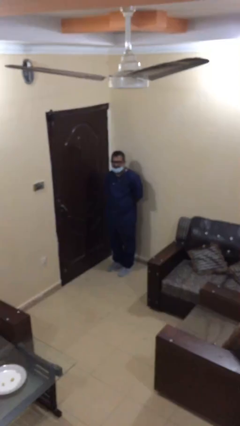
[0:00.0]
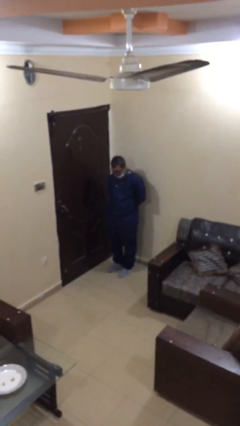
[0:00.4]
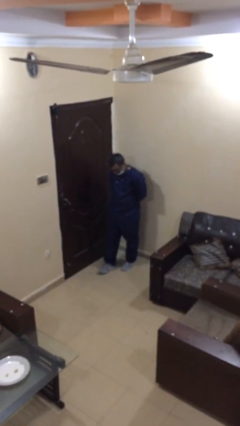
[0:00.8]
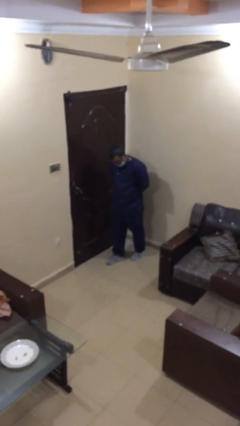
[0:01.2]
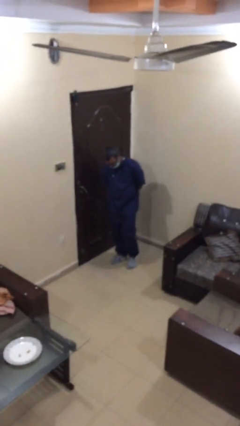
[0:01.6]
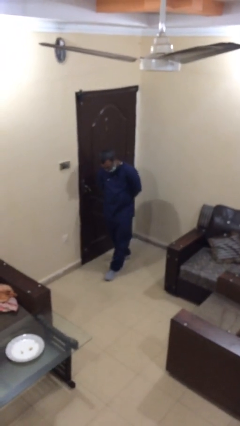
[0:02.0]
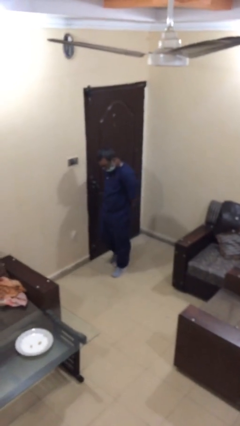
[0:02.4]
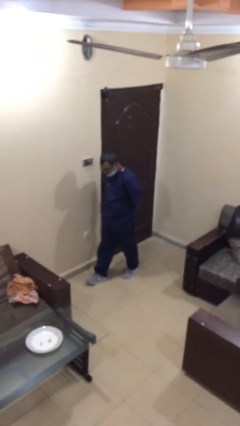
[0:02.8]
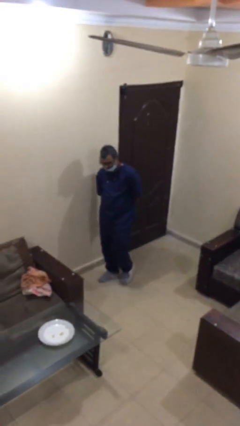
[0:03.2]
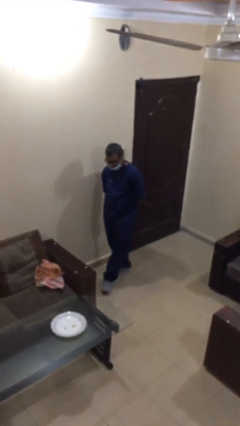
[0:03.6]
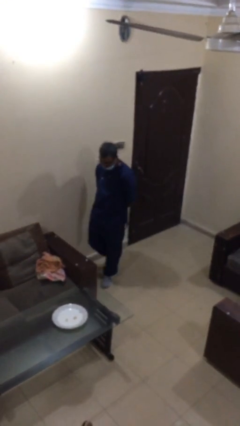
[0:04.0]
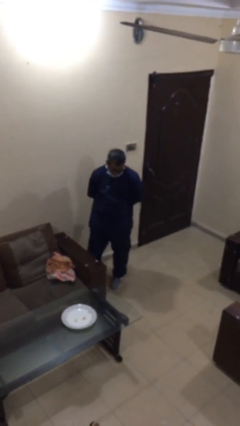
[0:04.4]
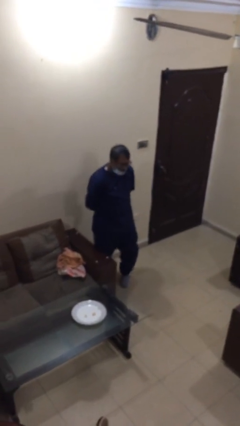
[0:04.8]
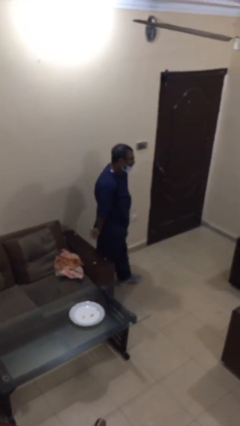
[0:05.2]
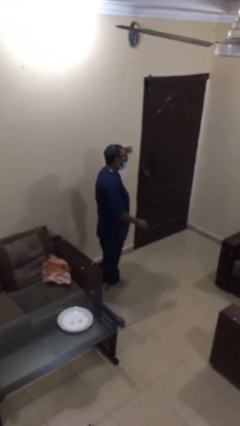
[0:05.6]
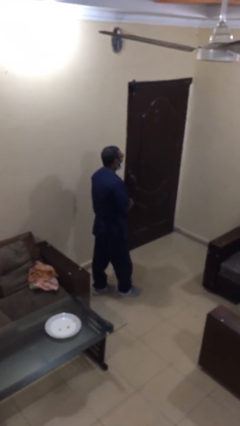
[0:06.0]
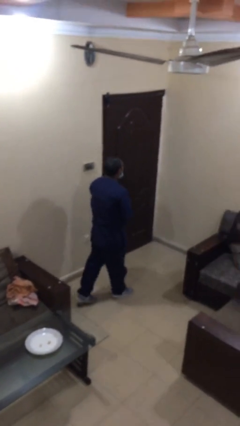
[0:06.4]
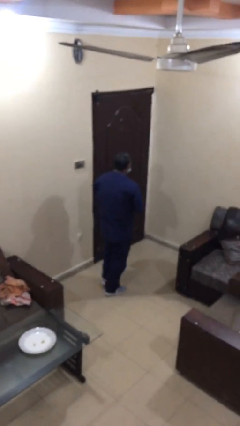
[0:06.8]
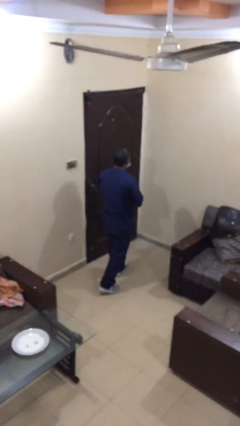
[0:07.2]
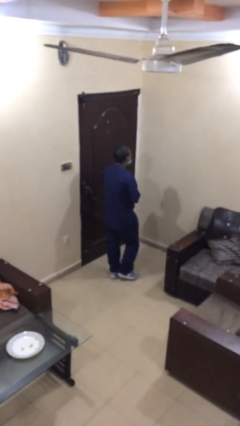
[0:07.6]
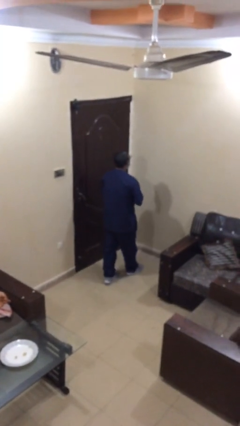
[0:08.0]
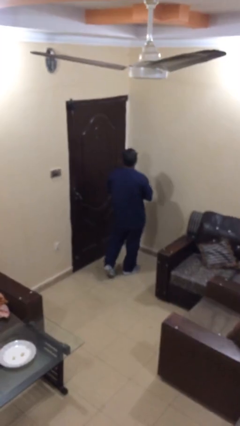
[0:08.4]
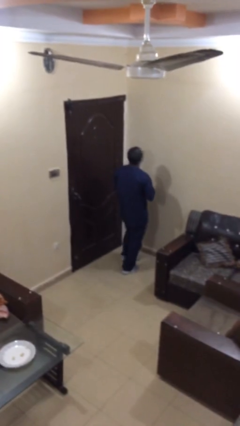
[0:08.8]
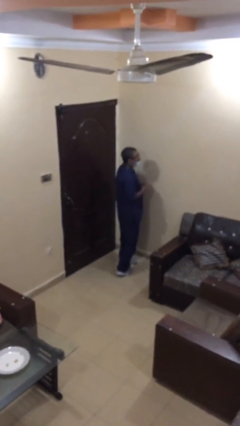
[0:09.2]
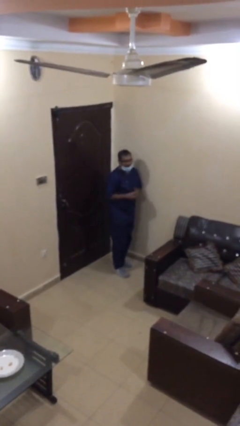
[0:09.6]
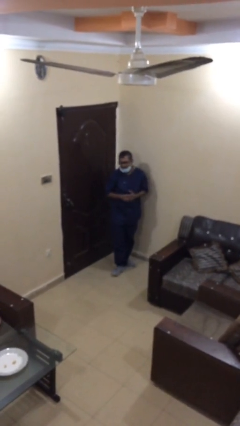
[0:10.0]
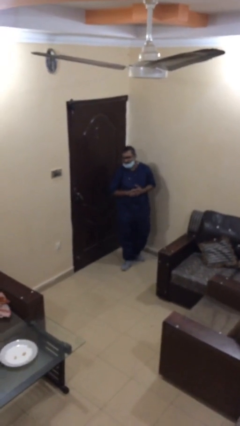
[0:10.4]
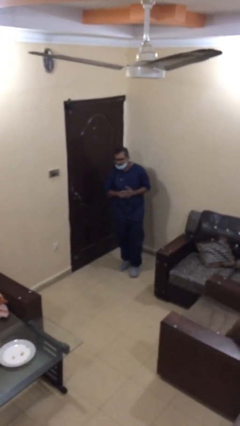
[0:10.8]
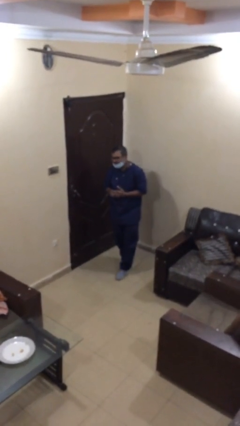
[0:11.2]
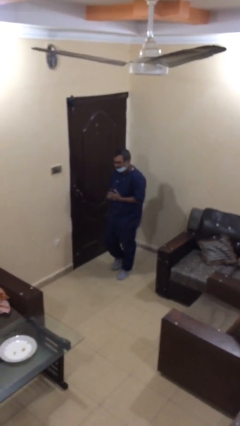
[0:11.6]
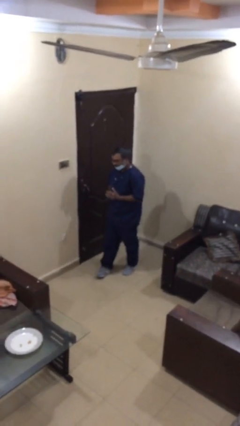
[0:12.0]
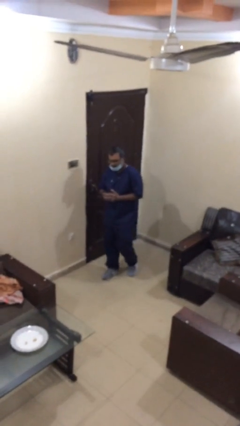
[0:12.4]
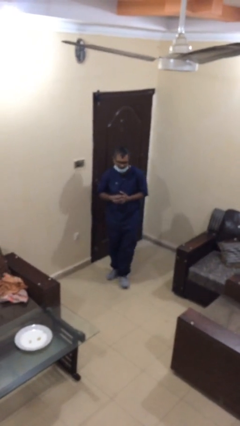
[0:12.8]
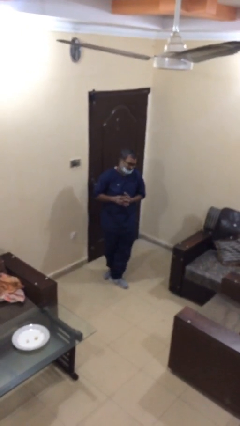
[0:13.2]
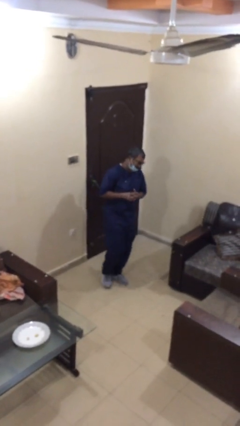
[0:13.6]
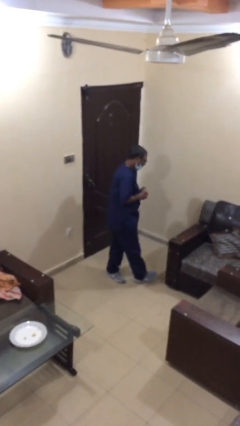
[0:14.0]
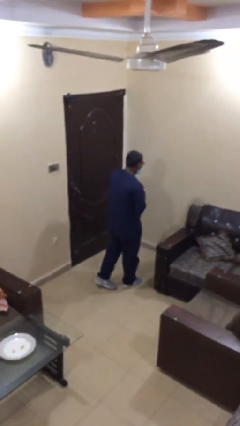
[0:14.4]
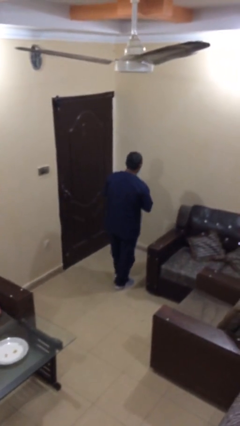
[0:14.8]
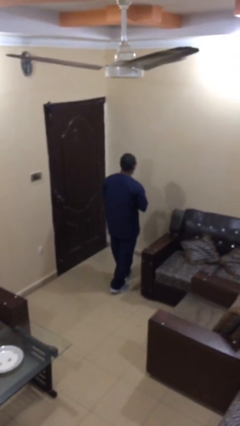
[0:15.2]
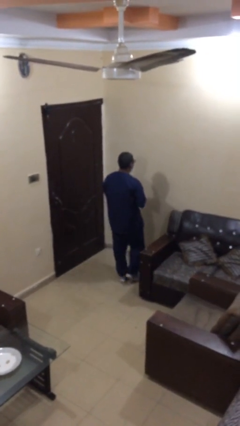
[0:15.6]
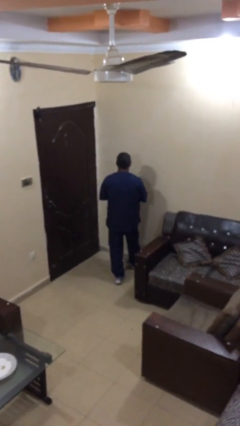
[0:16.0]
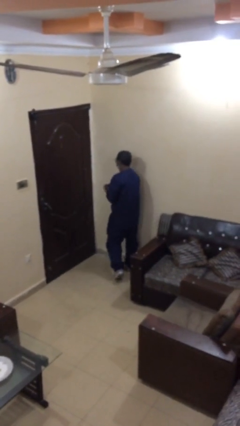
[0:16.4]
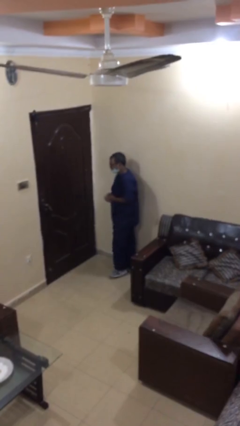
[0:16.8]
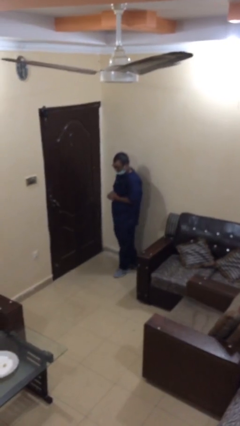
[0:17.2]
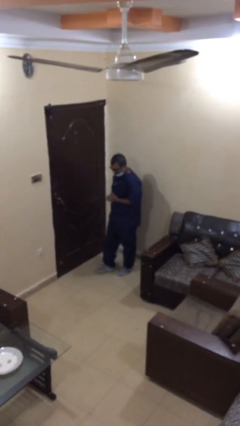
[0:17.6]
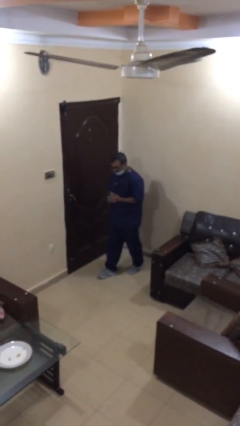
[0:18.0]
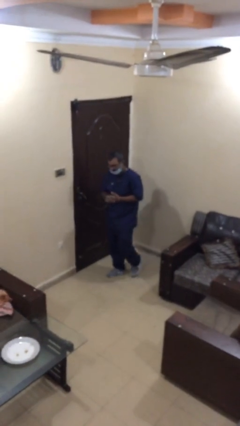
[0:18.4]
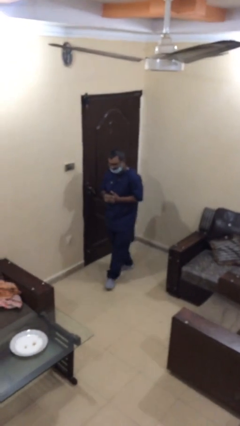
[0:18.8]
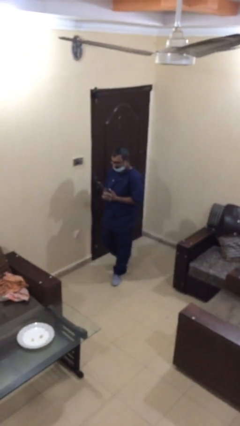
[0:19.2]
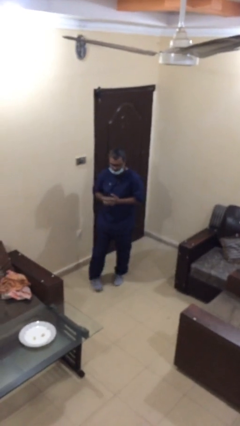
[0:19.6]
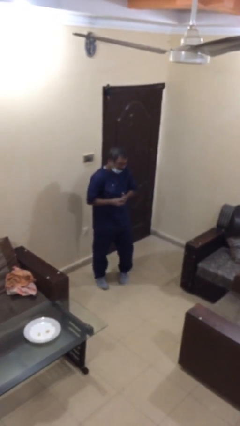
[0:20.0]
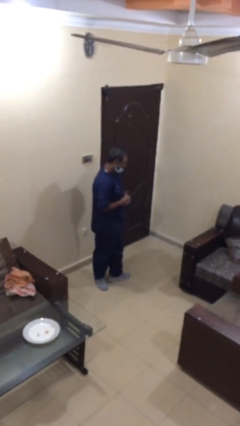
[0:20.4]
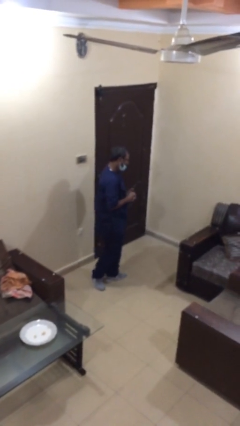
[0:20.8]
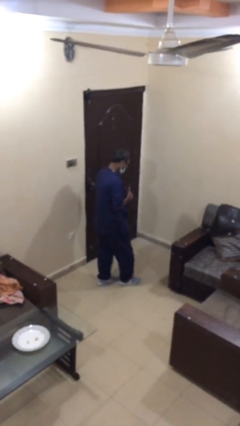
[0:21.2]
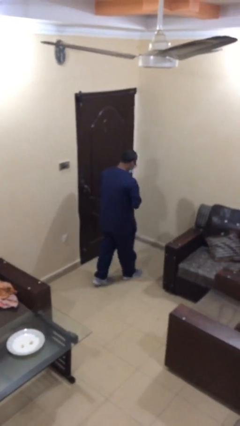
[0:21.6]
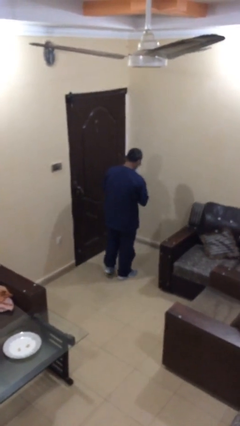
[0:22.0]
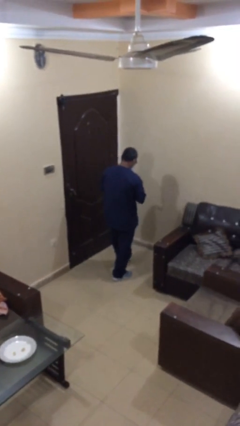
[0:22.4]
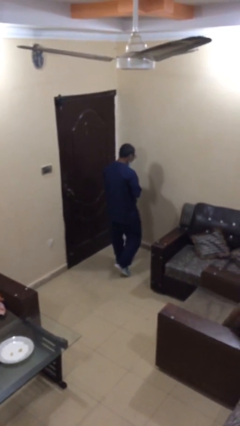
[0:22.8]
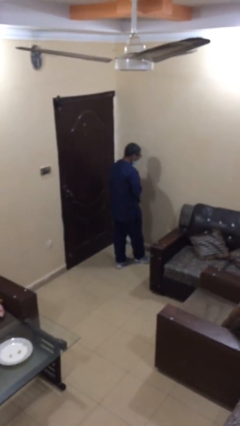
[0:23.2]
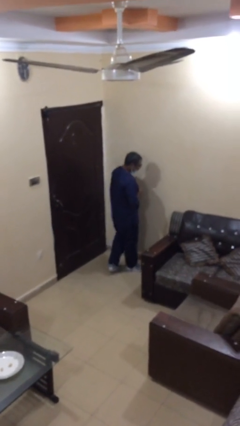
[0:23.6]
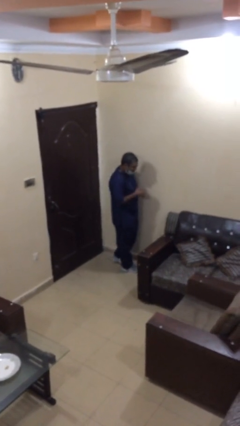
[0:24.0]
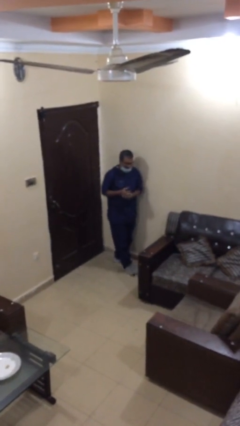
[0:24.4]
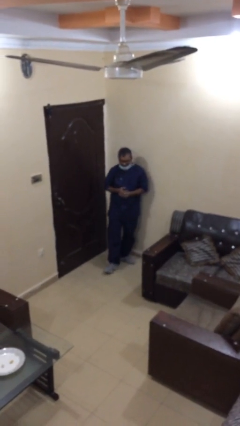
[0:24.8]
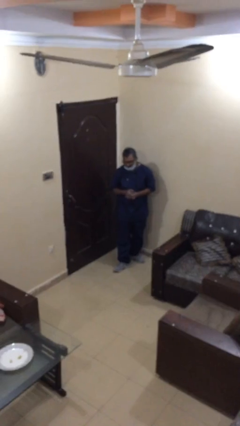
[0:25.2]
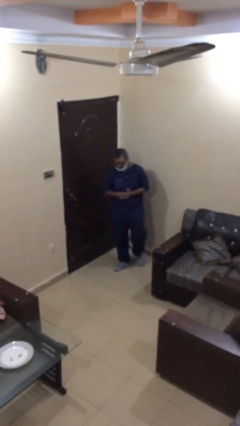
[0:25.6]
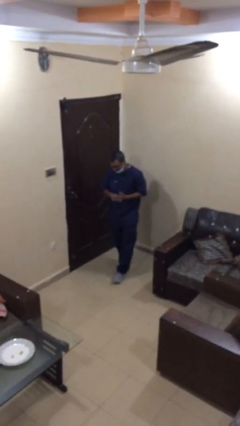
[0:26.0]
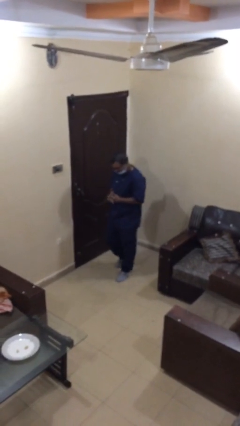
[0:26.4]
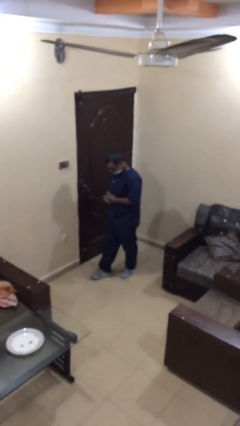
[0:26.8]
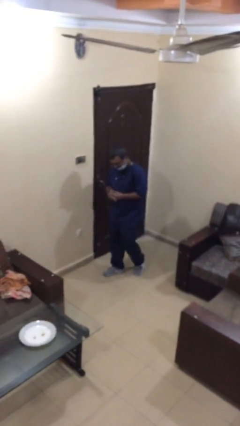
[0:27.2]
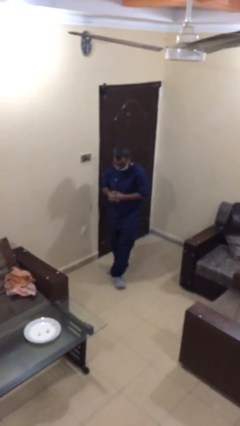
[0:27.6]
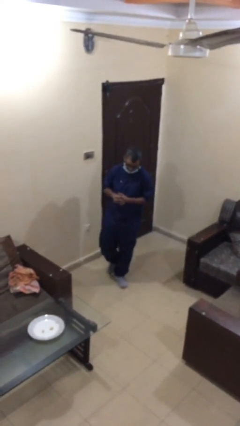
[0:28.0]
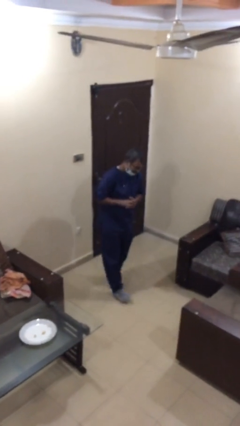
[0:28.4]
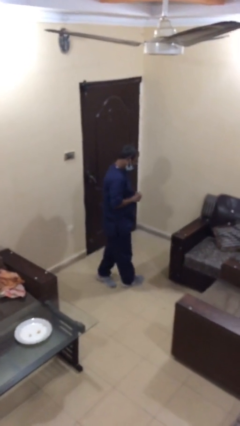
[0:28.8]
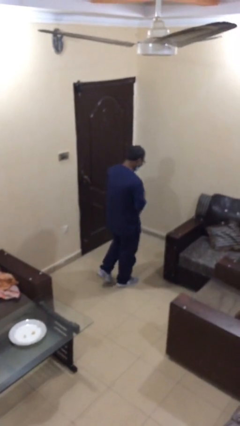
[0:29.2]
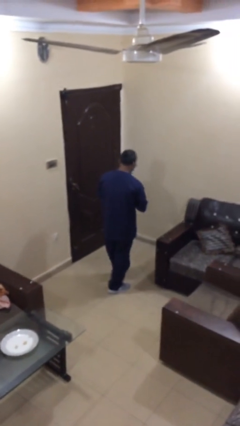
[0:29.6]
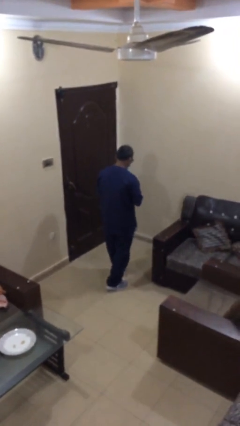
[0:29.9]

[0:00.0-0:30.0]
person walks

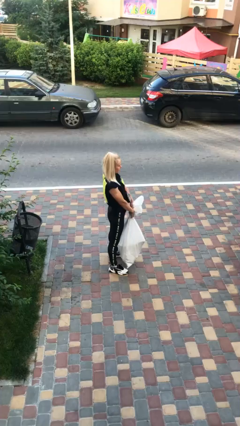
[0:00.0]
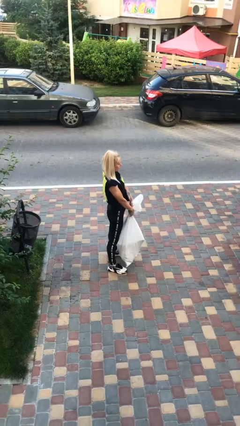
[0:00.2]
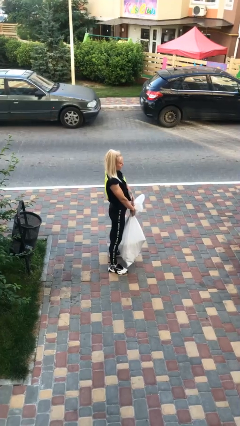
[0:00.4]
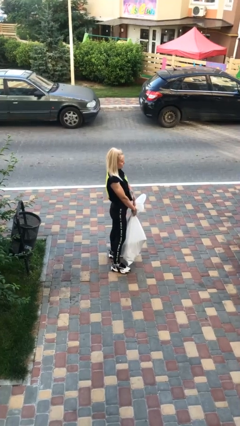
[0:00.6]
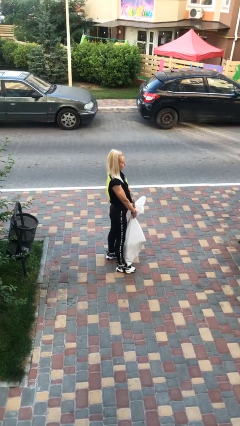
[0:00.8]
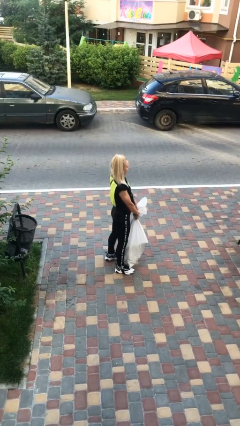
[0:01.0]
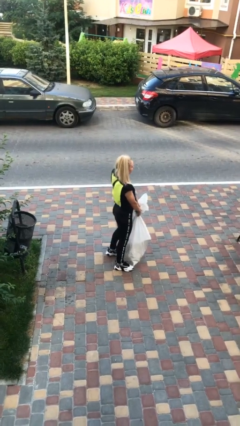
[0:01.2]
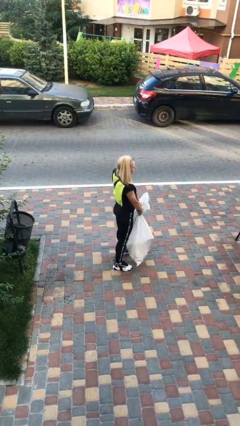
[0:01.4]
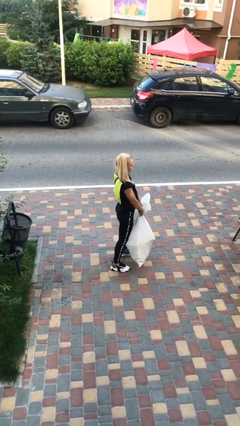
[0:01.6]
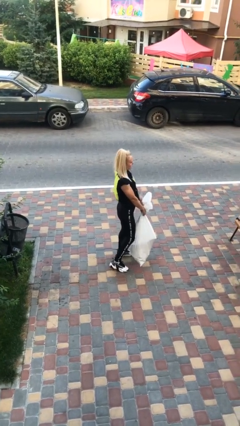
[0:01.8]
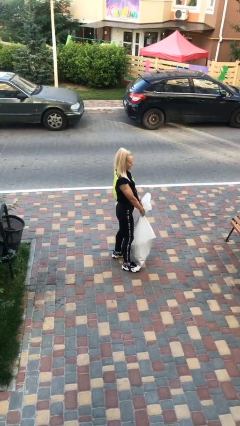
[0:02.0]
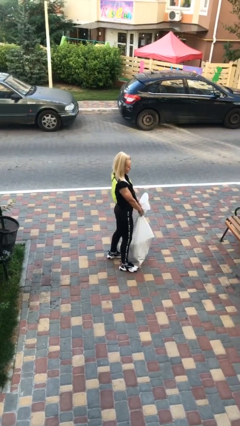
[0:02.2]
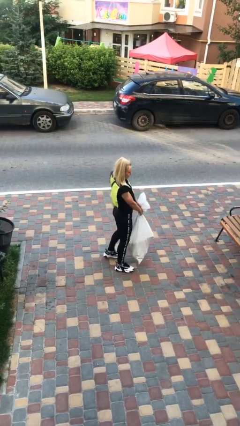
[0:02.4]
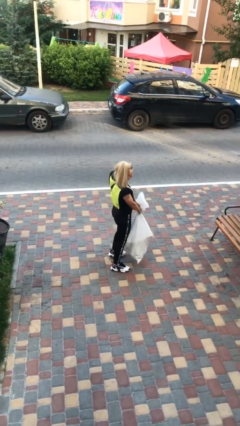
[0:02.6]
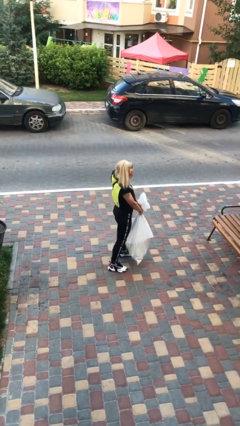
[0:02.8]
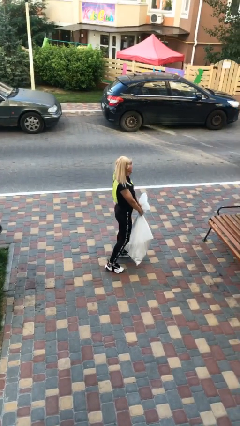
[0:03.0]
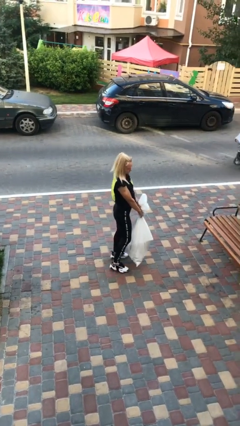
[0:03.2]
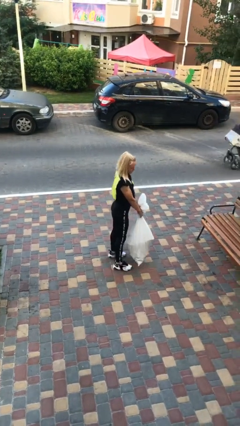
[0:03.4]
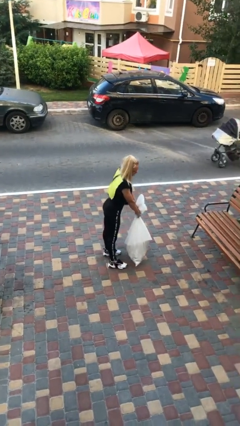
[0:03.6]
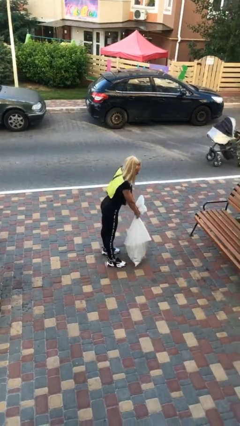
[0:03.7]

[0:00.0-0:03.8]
person carries heavy object
